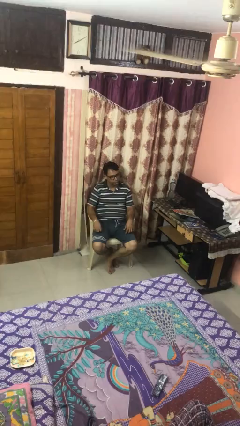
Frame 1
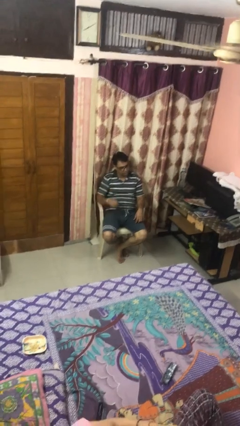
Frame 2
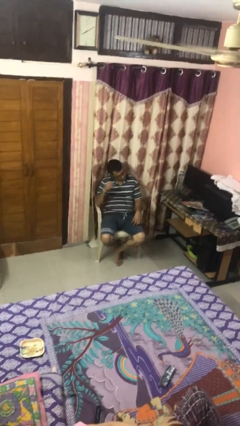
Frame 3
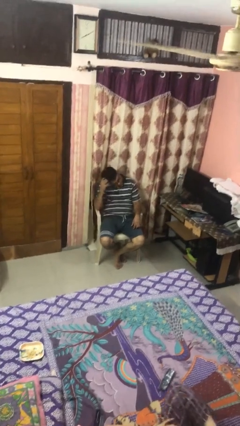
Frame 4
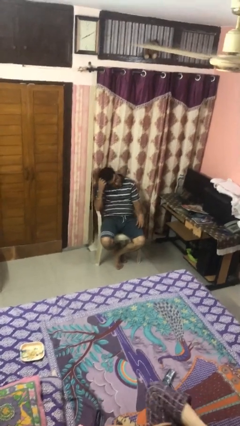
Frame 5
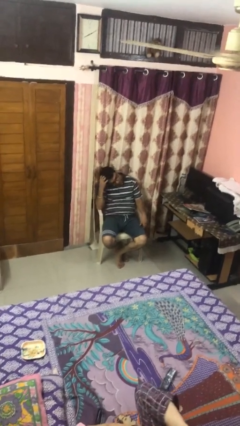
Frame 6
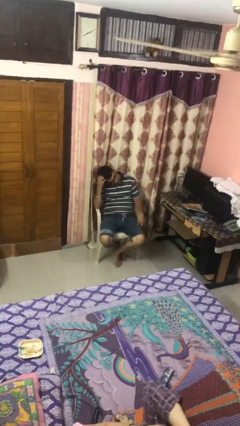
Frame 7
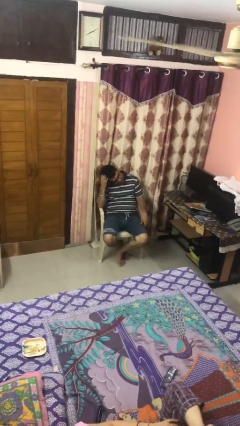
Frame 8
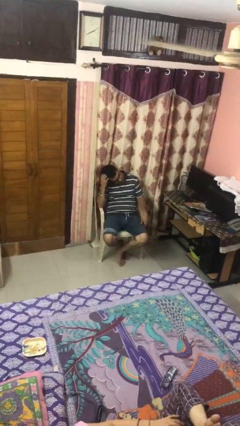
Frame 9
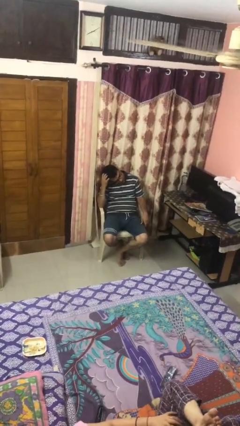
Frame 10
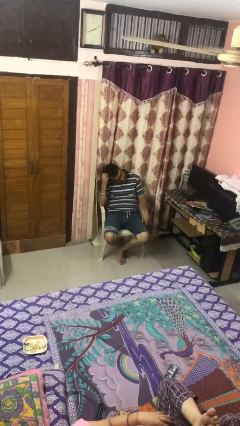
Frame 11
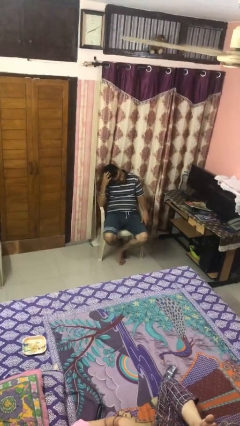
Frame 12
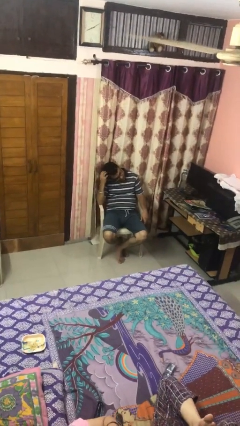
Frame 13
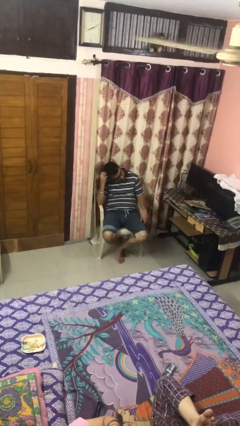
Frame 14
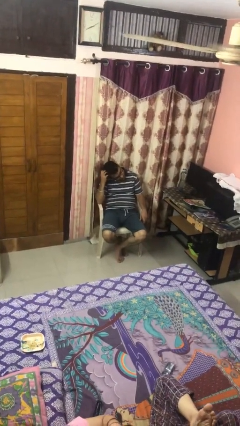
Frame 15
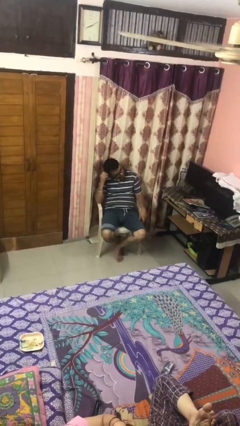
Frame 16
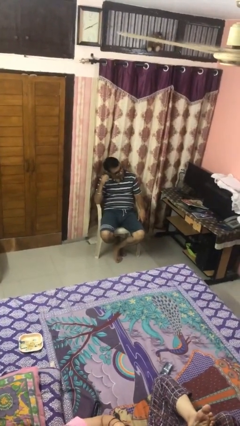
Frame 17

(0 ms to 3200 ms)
person scratches face

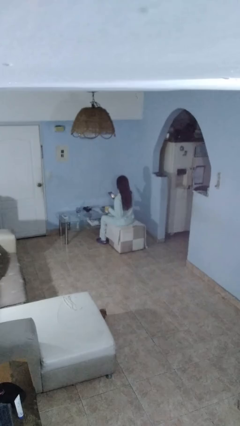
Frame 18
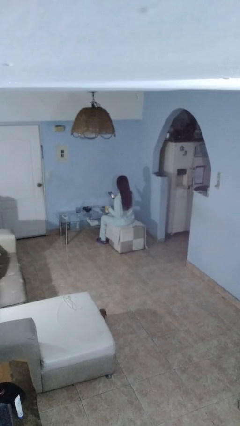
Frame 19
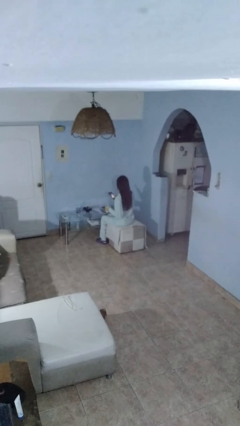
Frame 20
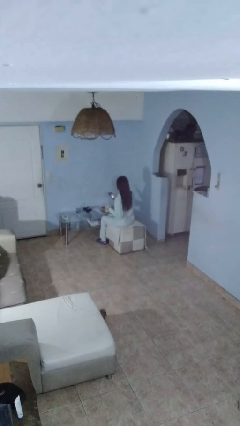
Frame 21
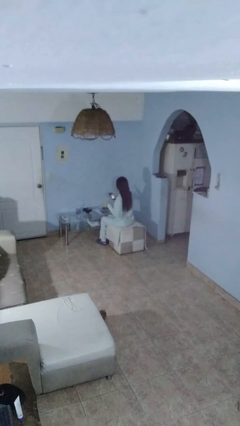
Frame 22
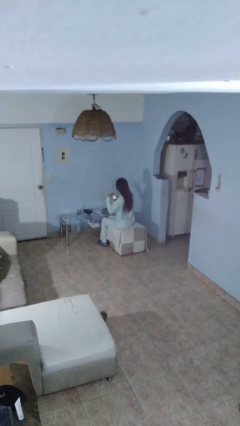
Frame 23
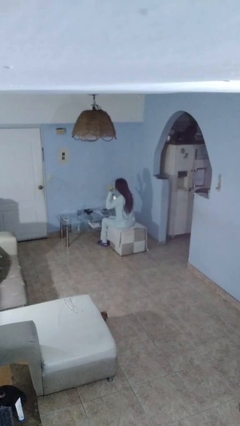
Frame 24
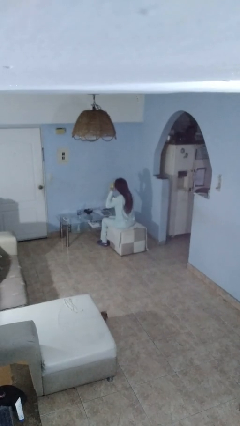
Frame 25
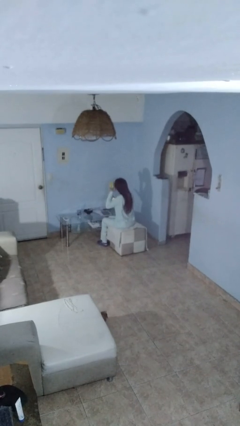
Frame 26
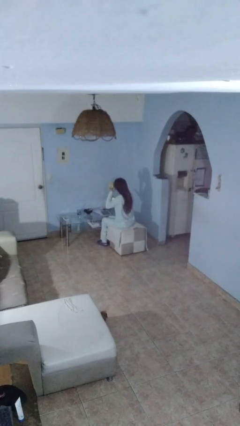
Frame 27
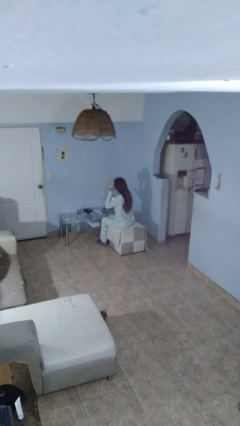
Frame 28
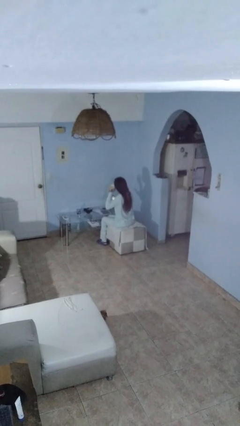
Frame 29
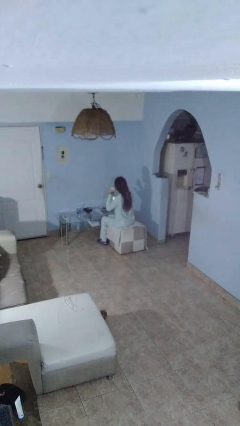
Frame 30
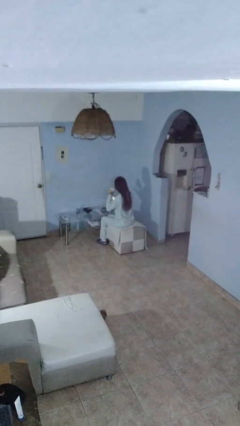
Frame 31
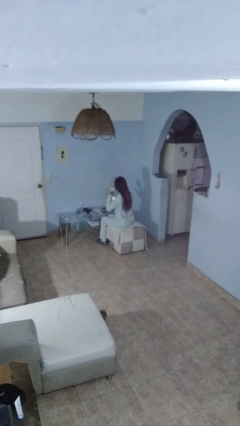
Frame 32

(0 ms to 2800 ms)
person drinks from mug

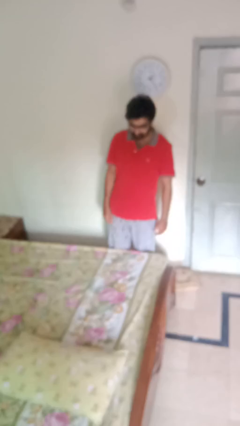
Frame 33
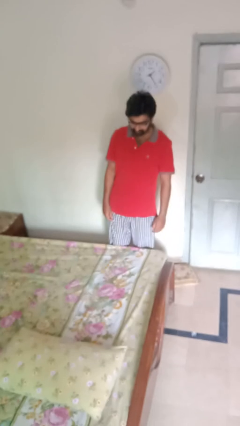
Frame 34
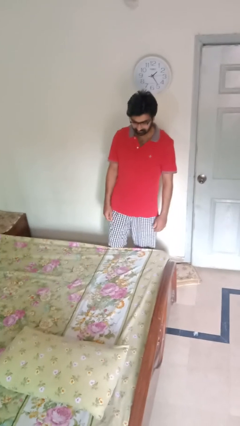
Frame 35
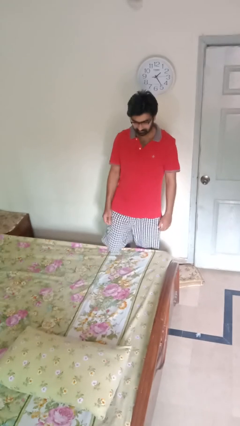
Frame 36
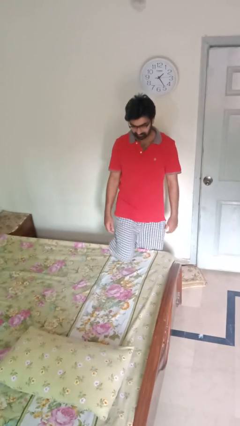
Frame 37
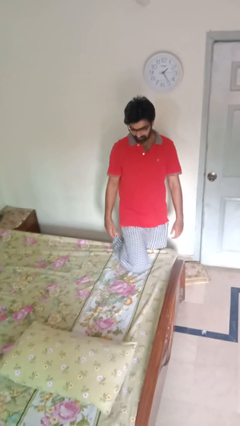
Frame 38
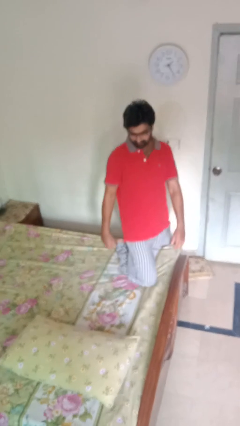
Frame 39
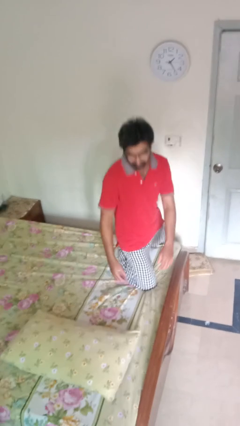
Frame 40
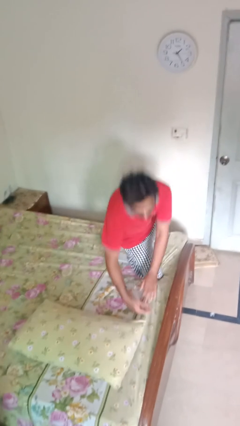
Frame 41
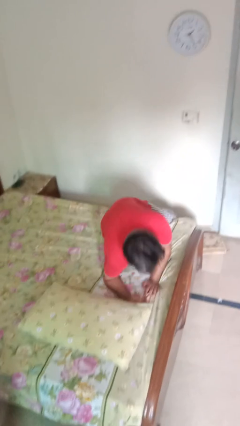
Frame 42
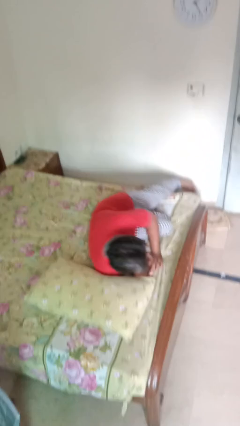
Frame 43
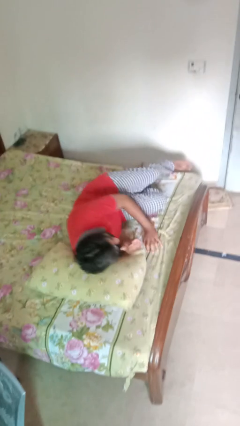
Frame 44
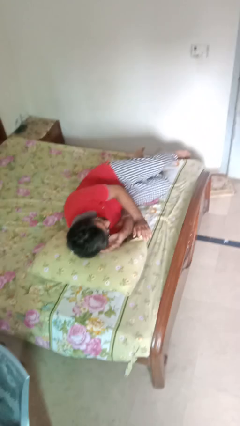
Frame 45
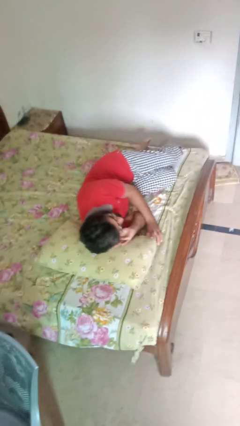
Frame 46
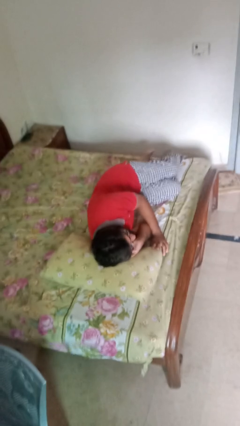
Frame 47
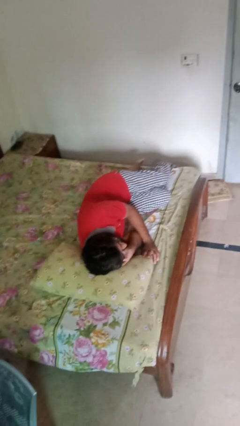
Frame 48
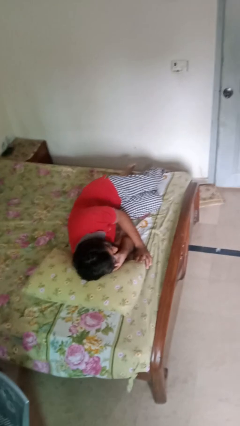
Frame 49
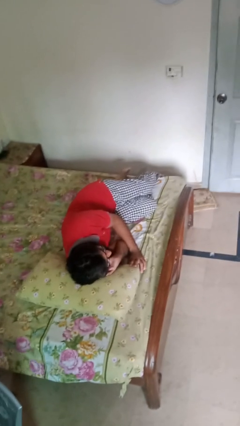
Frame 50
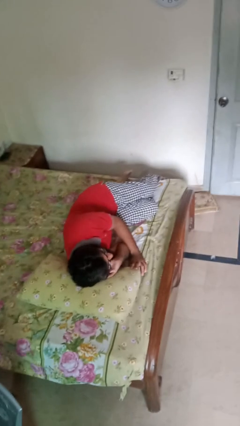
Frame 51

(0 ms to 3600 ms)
person lies down on bed

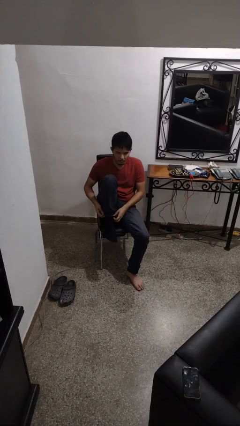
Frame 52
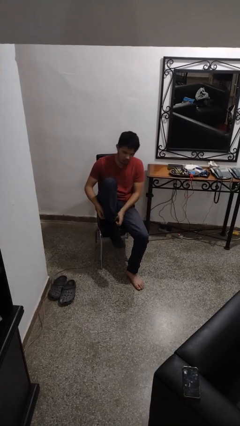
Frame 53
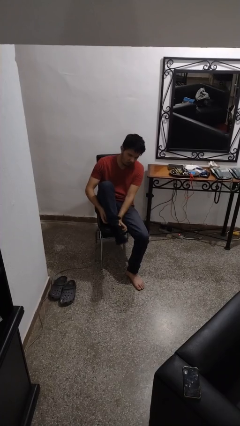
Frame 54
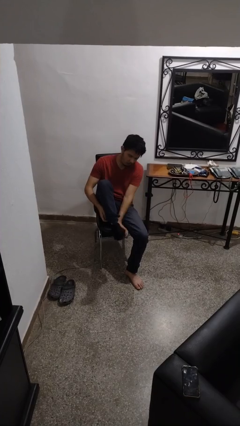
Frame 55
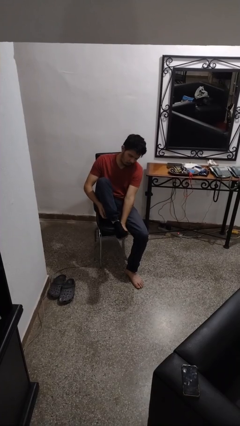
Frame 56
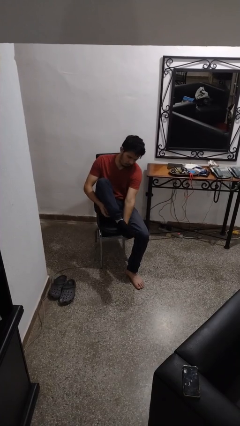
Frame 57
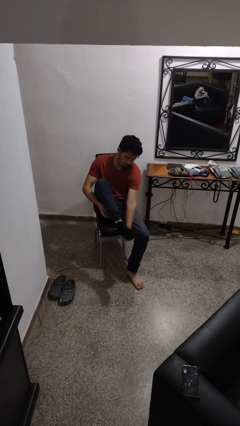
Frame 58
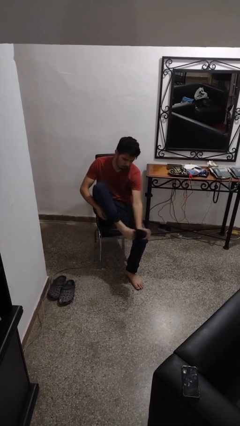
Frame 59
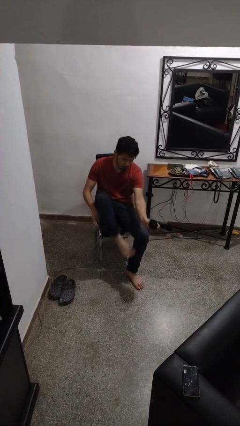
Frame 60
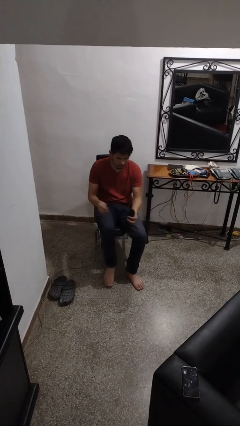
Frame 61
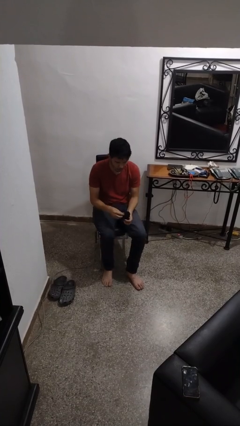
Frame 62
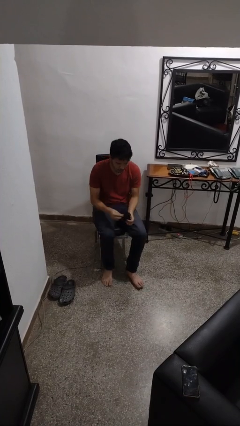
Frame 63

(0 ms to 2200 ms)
person takes off socks

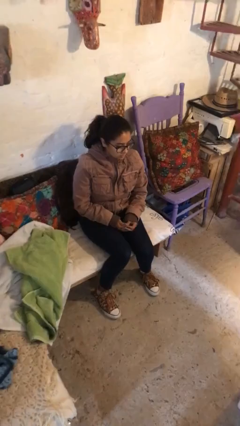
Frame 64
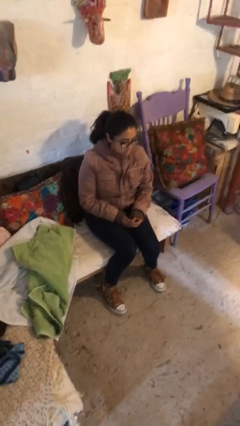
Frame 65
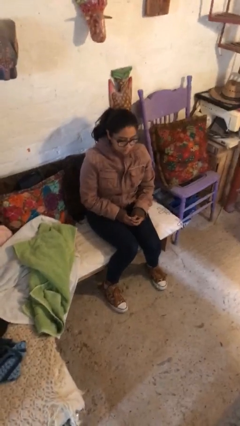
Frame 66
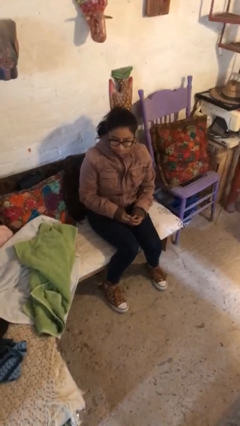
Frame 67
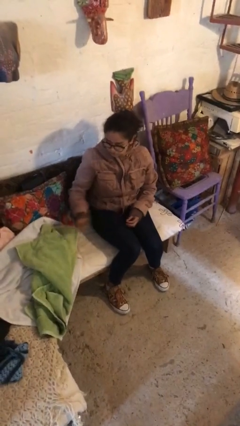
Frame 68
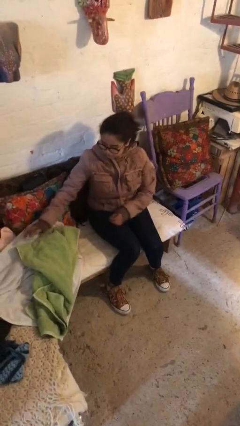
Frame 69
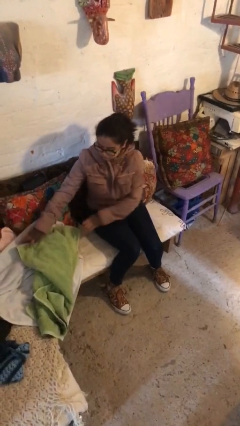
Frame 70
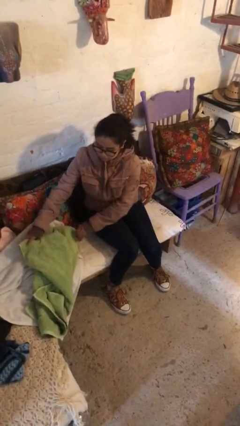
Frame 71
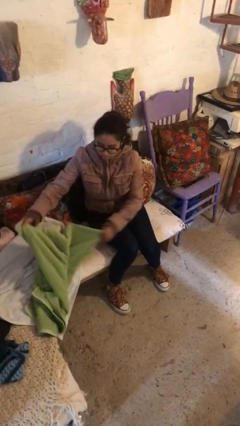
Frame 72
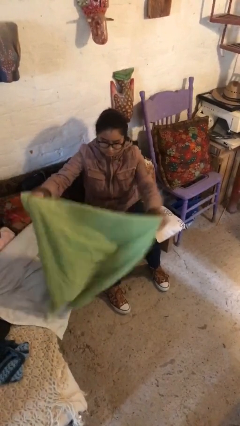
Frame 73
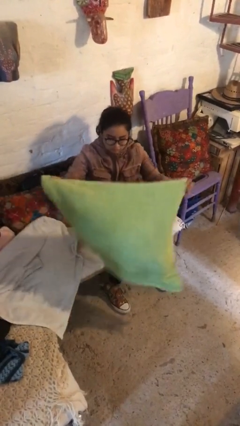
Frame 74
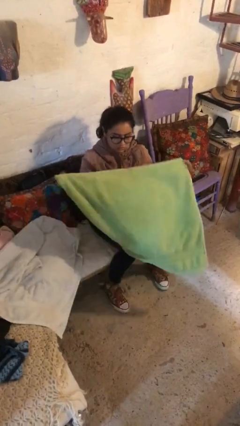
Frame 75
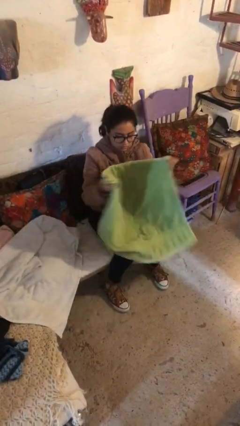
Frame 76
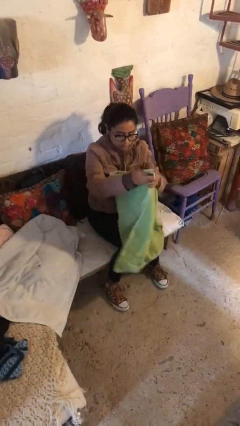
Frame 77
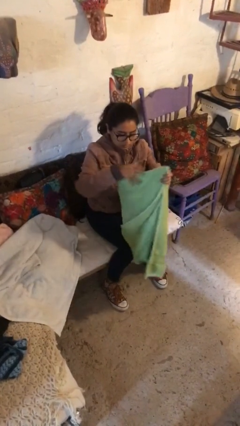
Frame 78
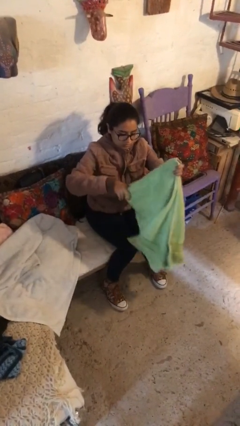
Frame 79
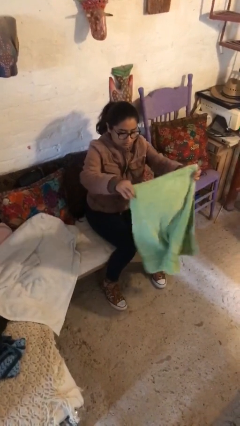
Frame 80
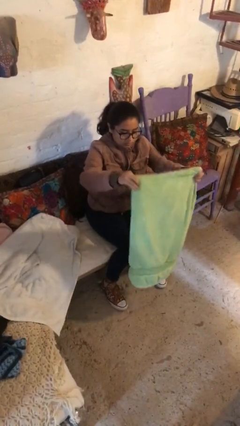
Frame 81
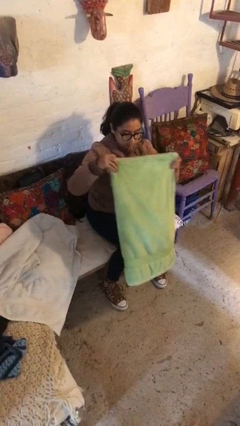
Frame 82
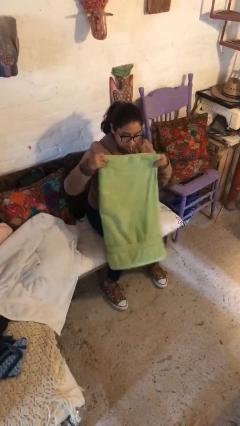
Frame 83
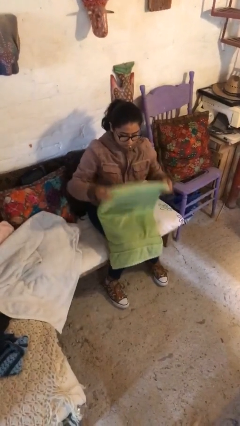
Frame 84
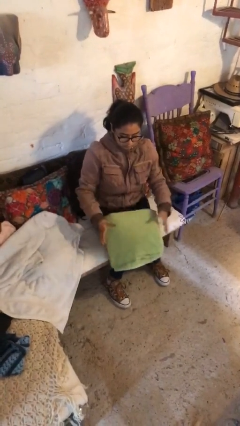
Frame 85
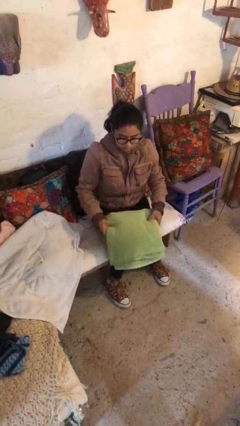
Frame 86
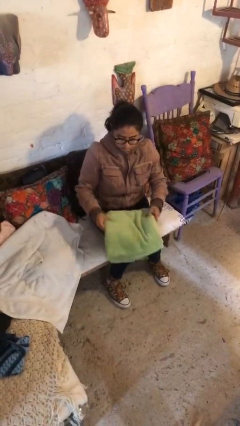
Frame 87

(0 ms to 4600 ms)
person folds towel

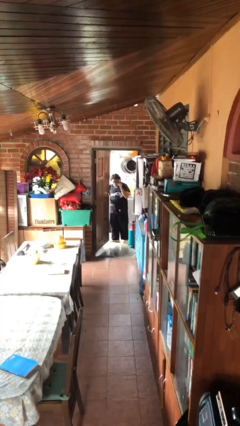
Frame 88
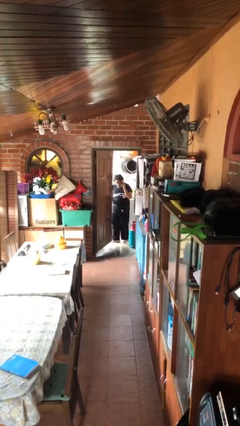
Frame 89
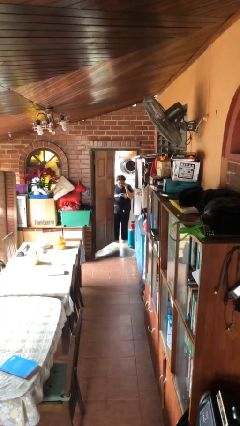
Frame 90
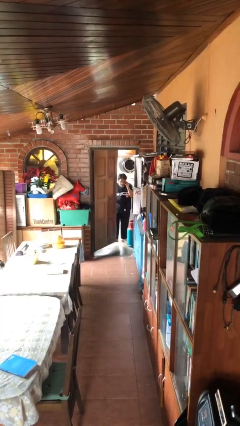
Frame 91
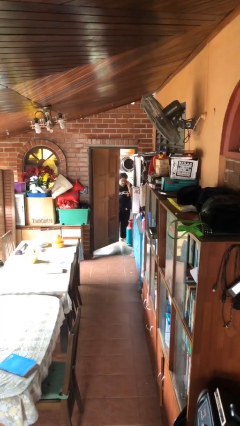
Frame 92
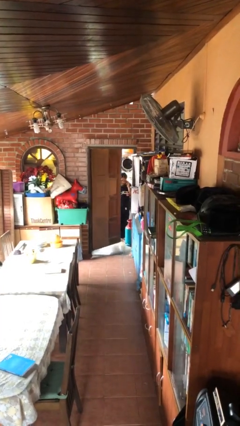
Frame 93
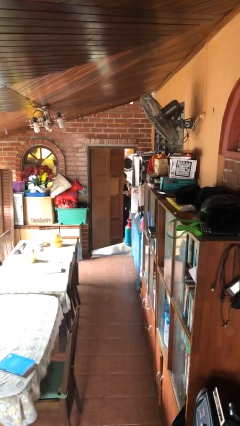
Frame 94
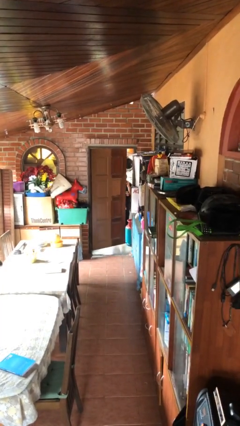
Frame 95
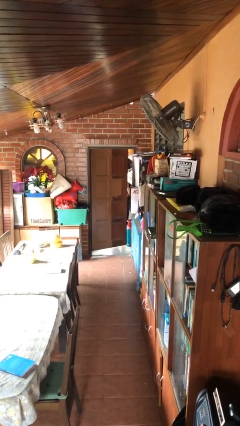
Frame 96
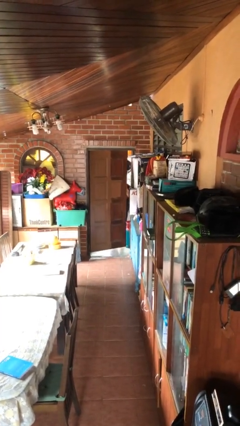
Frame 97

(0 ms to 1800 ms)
person closes facility door
